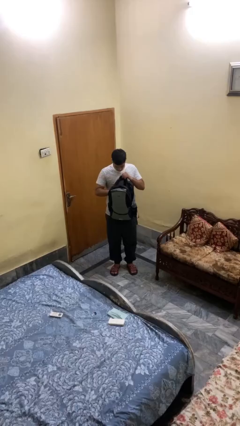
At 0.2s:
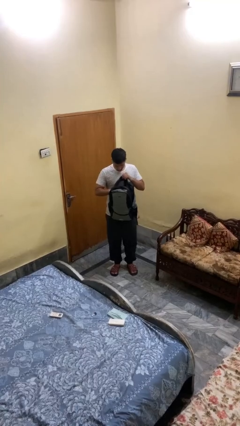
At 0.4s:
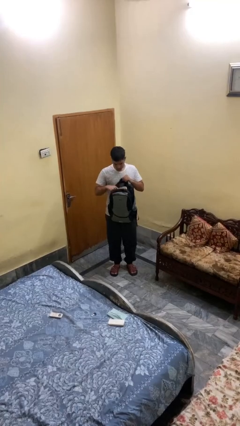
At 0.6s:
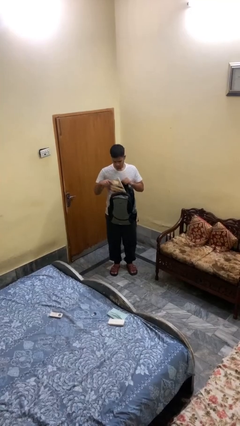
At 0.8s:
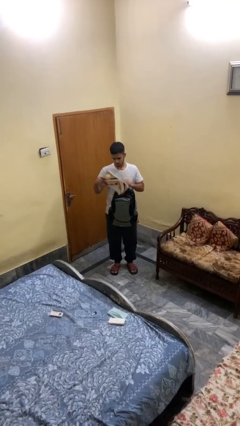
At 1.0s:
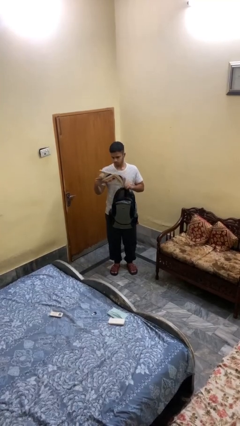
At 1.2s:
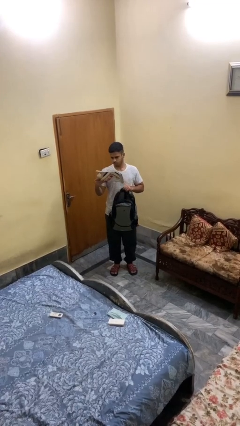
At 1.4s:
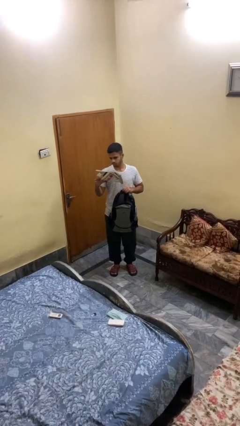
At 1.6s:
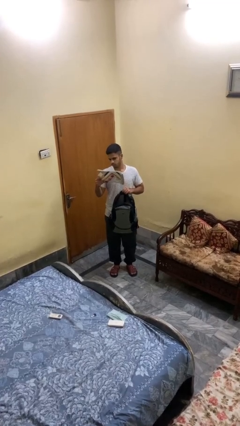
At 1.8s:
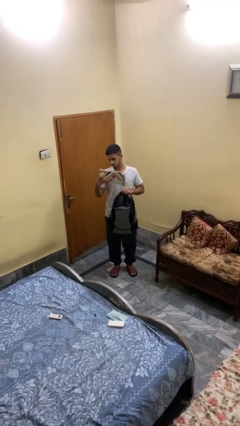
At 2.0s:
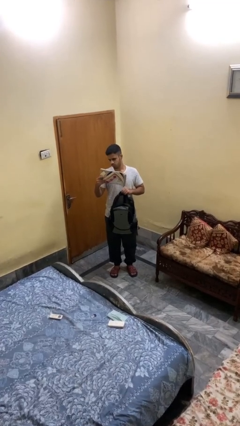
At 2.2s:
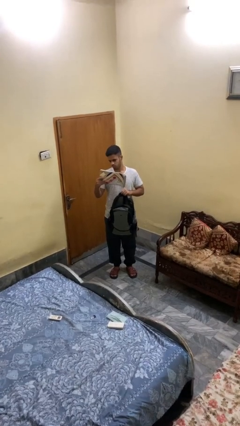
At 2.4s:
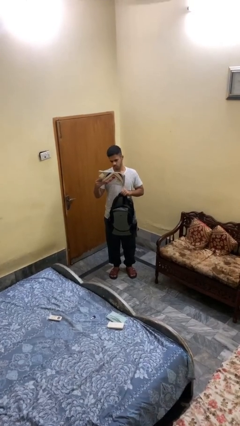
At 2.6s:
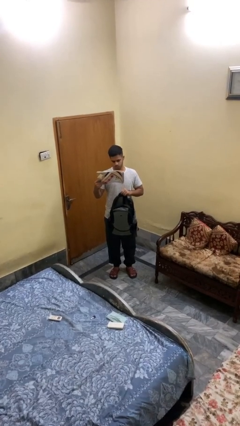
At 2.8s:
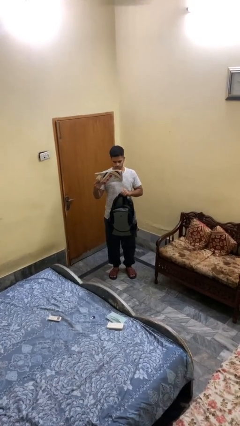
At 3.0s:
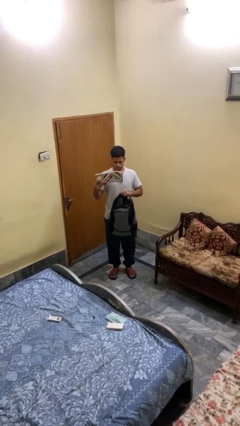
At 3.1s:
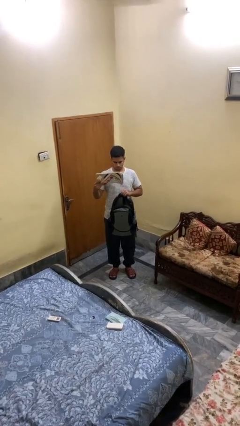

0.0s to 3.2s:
person takes object from backpack

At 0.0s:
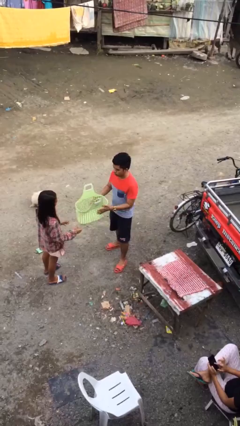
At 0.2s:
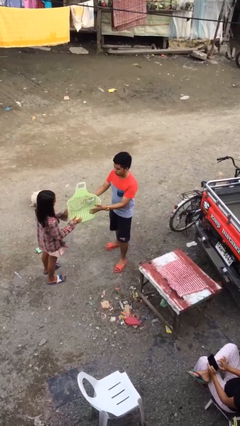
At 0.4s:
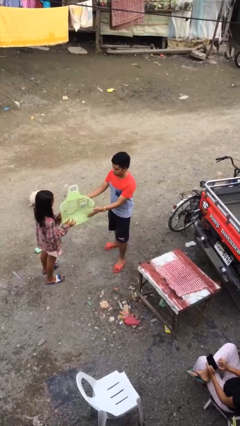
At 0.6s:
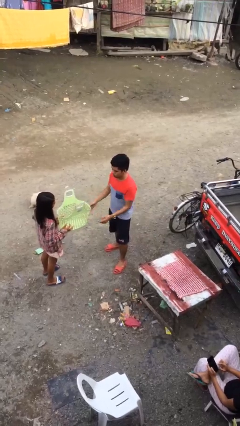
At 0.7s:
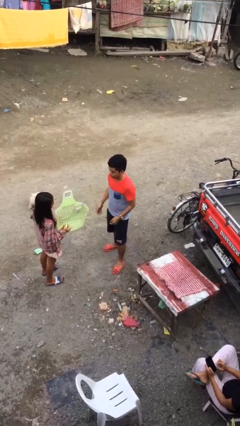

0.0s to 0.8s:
person transfers object to person

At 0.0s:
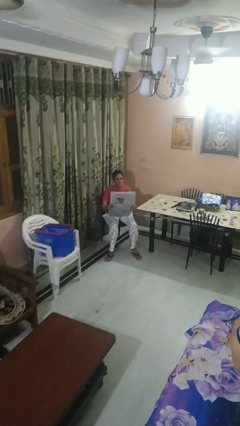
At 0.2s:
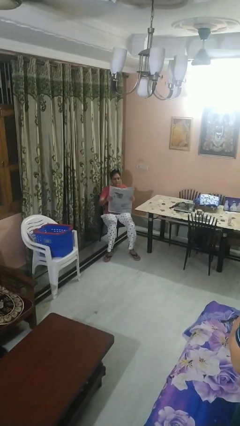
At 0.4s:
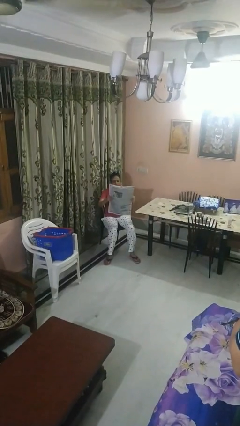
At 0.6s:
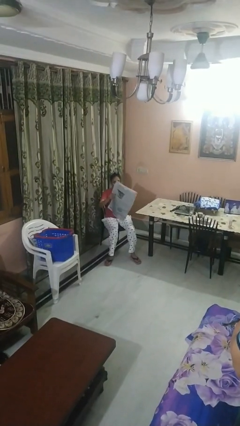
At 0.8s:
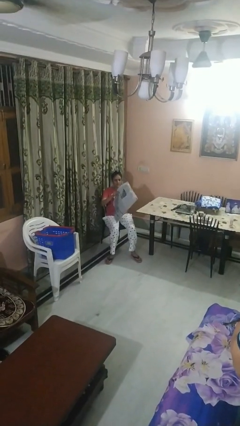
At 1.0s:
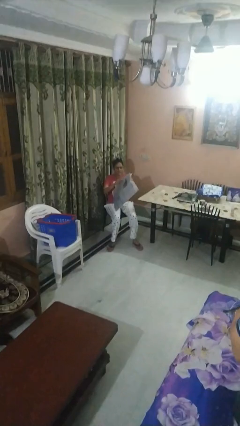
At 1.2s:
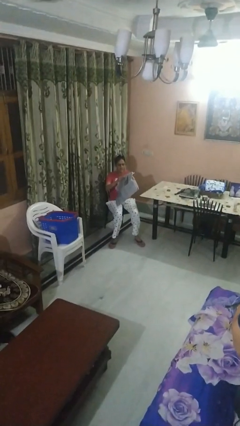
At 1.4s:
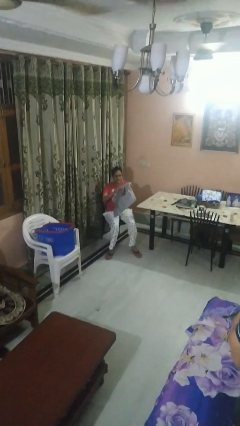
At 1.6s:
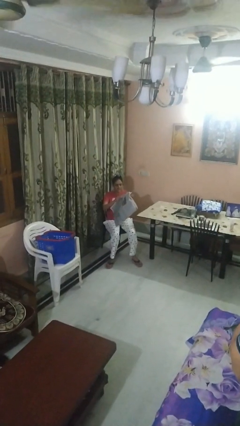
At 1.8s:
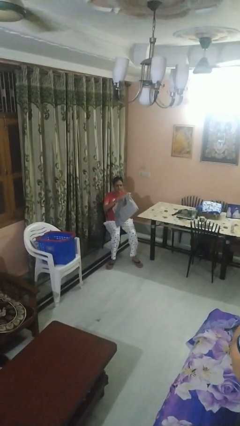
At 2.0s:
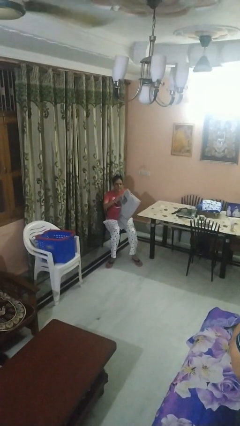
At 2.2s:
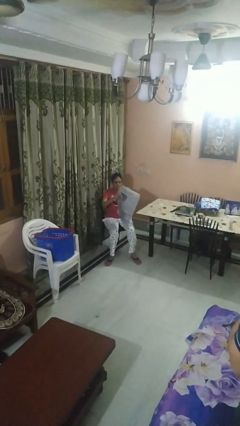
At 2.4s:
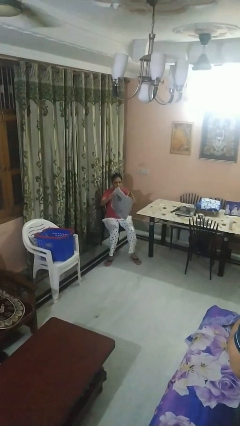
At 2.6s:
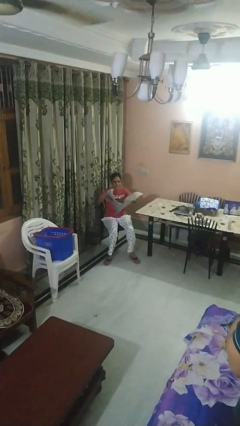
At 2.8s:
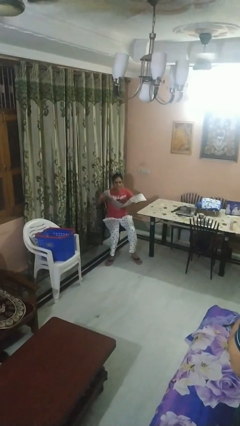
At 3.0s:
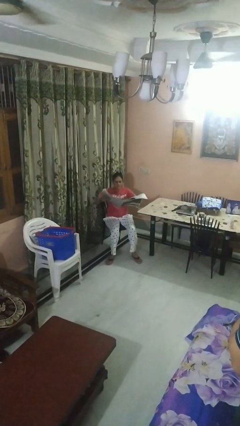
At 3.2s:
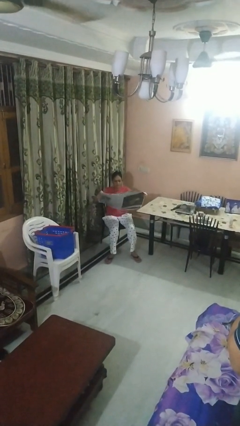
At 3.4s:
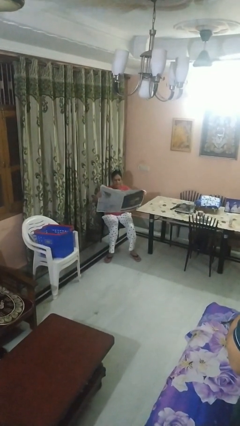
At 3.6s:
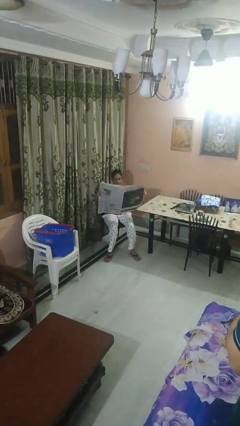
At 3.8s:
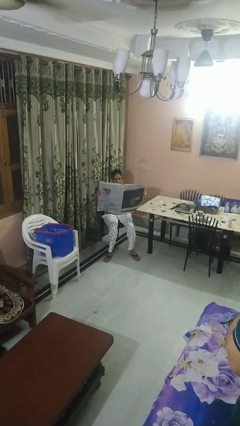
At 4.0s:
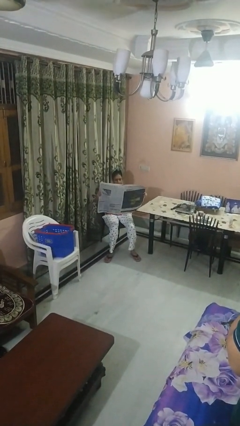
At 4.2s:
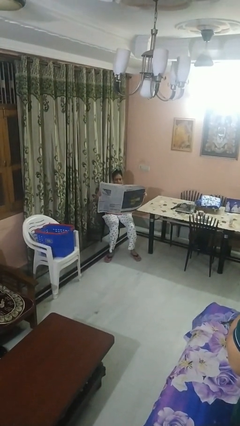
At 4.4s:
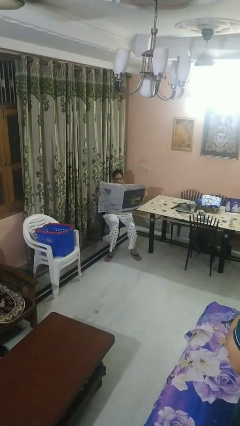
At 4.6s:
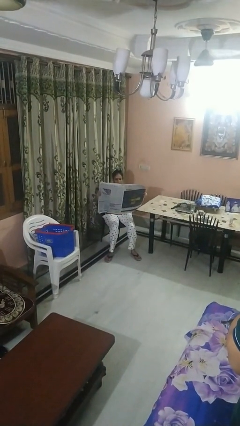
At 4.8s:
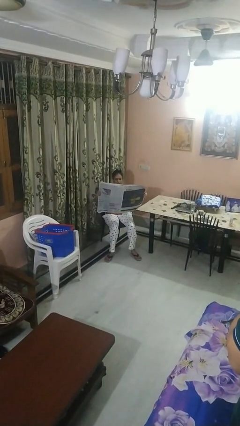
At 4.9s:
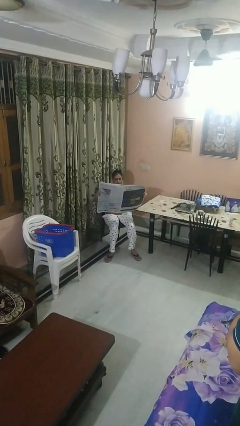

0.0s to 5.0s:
person reads newspaper

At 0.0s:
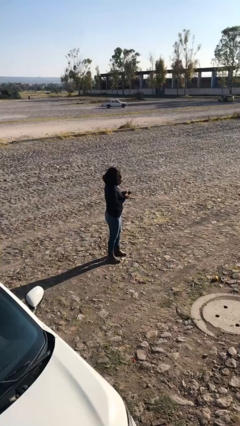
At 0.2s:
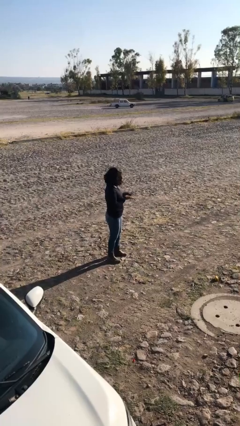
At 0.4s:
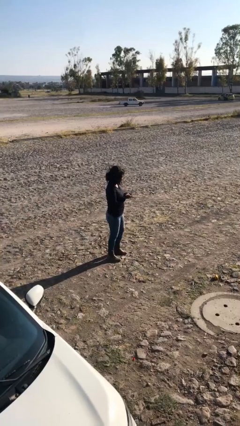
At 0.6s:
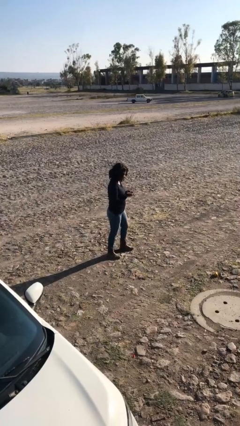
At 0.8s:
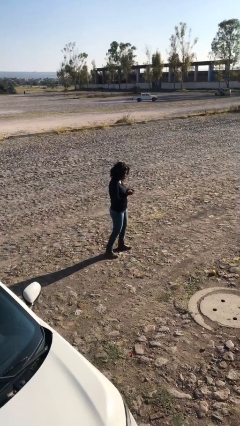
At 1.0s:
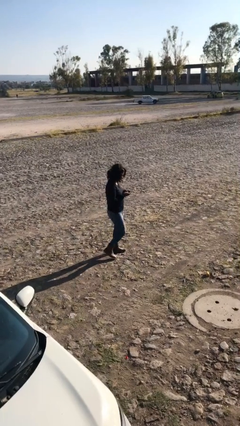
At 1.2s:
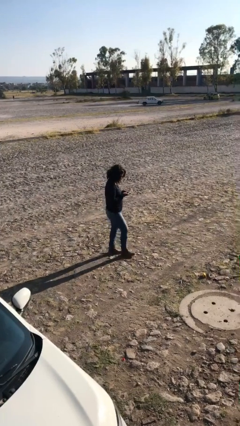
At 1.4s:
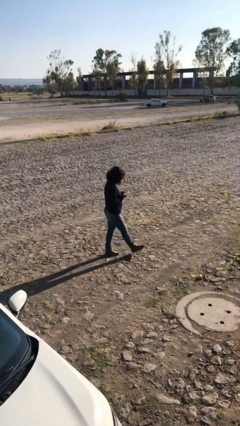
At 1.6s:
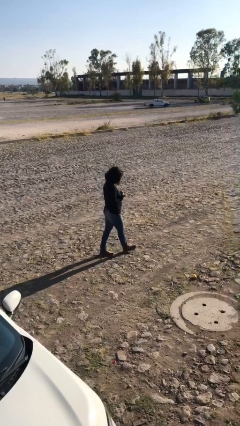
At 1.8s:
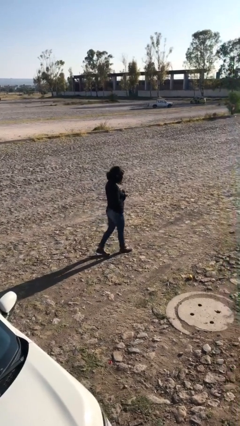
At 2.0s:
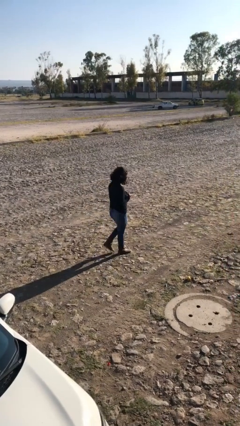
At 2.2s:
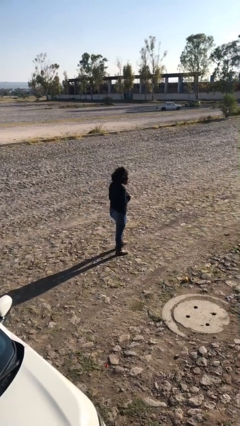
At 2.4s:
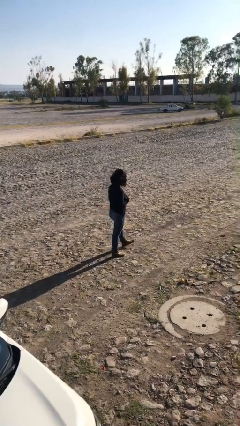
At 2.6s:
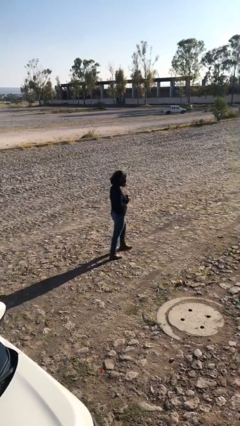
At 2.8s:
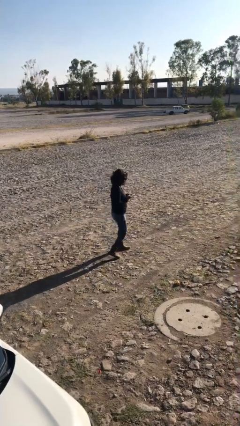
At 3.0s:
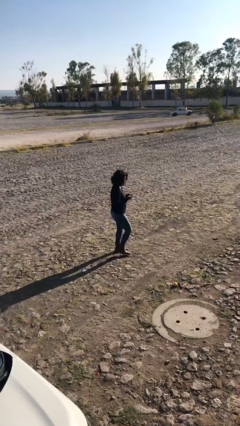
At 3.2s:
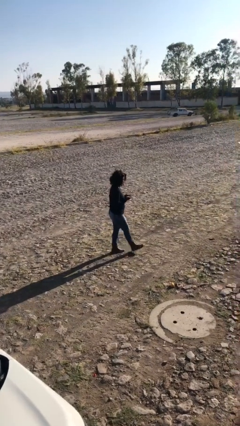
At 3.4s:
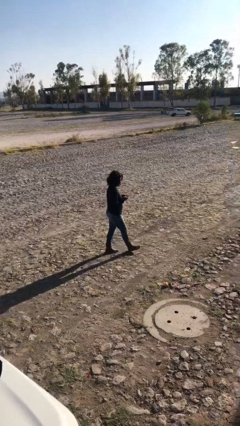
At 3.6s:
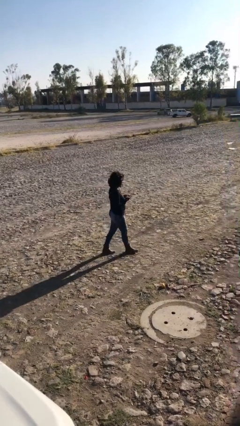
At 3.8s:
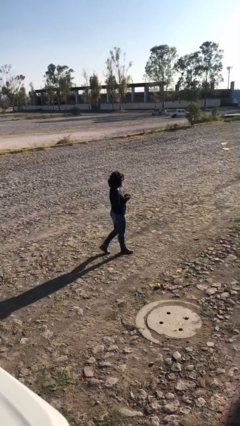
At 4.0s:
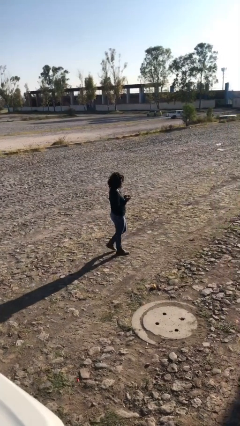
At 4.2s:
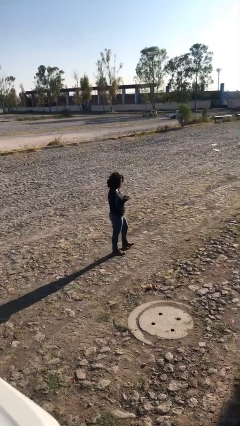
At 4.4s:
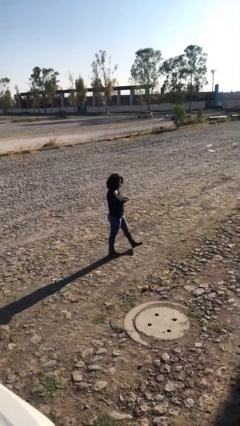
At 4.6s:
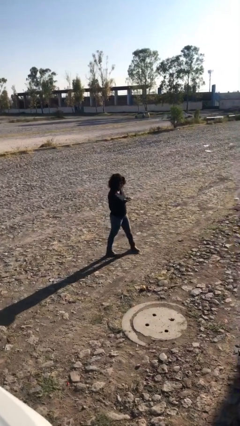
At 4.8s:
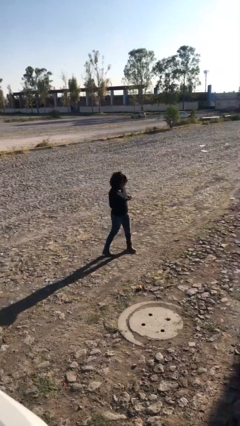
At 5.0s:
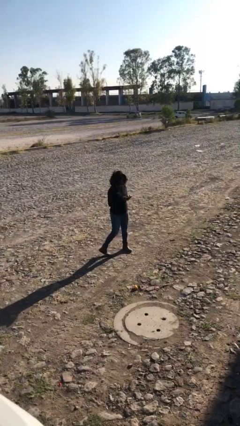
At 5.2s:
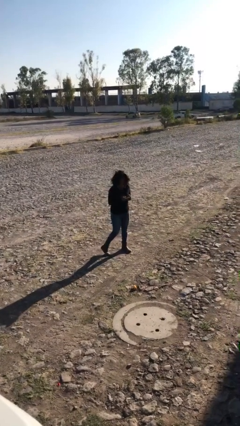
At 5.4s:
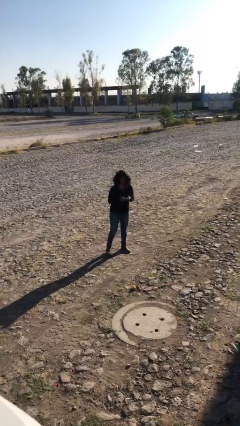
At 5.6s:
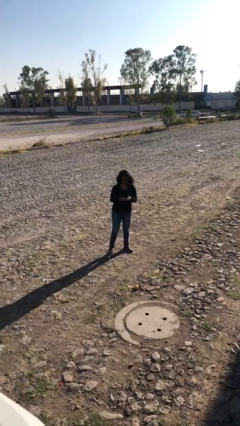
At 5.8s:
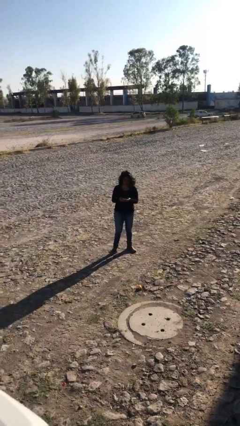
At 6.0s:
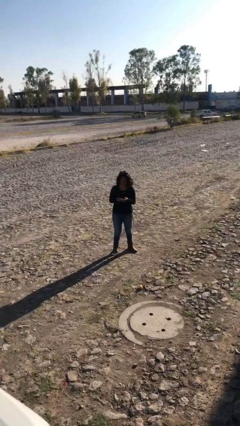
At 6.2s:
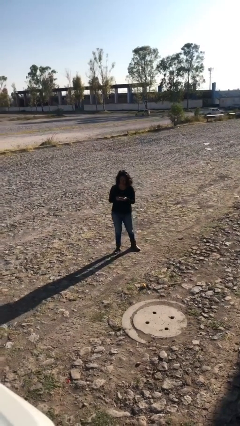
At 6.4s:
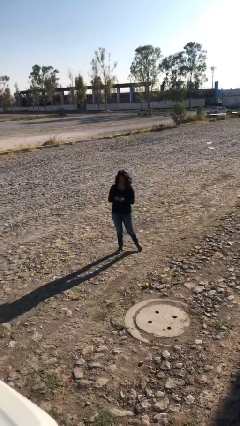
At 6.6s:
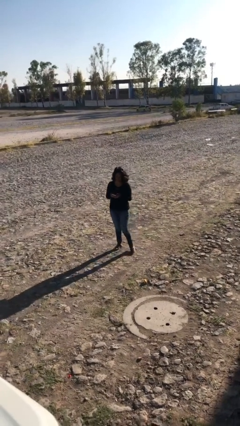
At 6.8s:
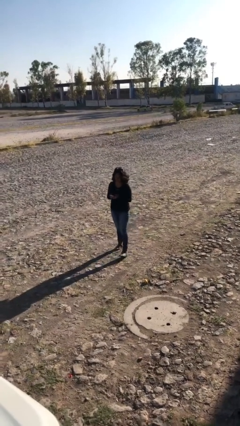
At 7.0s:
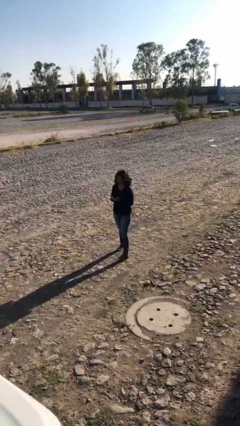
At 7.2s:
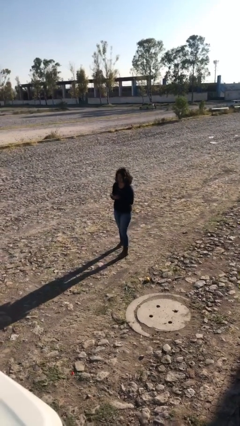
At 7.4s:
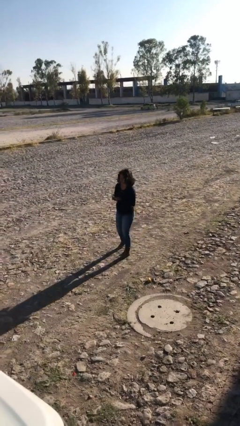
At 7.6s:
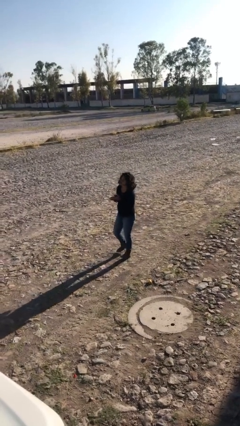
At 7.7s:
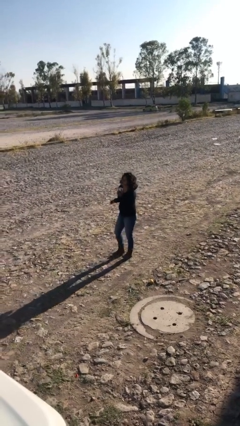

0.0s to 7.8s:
person texts on phone

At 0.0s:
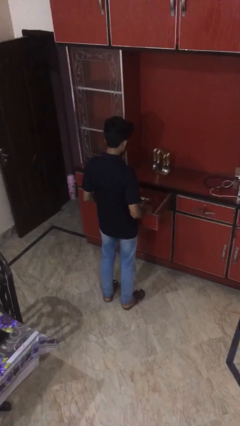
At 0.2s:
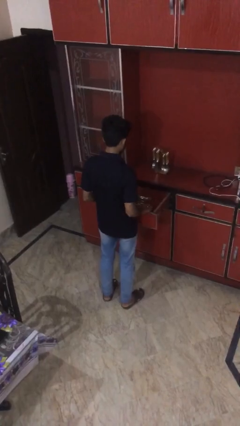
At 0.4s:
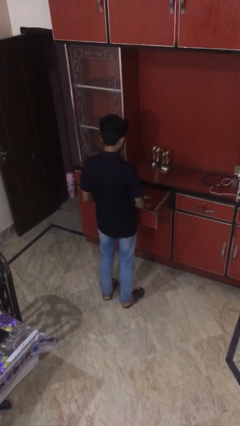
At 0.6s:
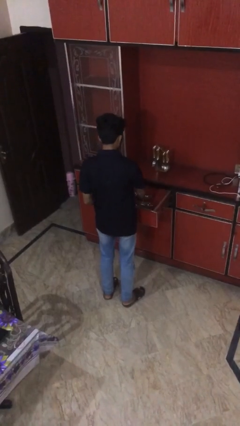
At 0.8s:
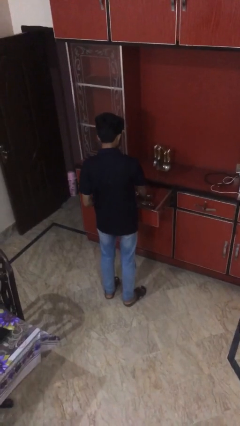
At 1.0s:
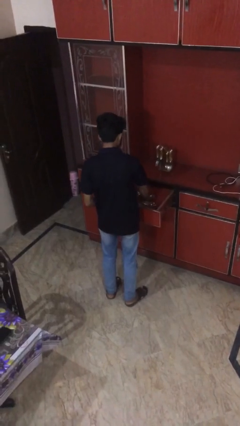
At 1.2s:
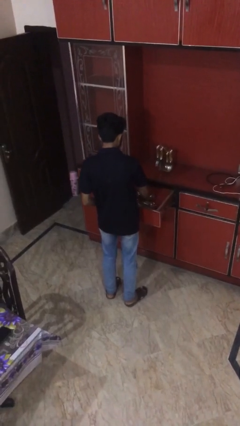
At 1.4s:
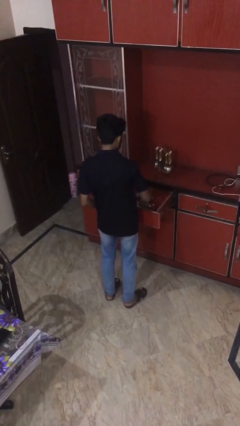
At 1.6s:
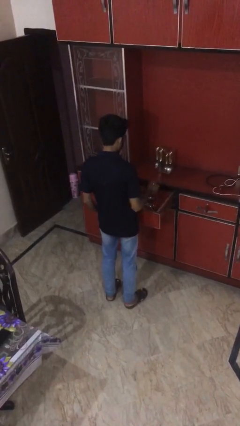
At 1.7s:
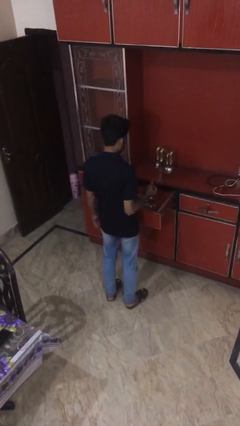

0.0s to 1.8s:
person takes object from kitchen drawer
